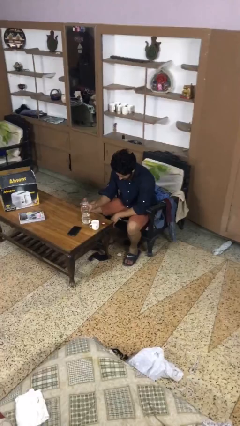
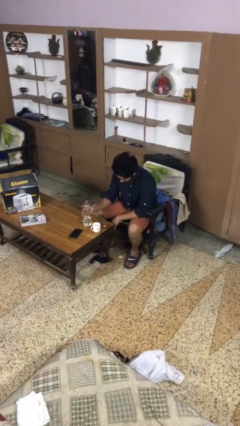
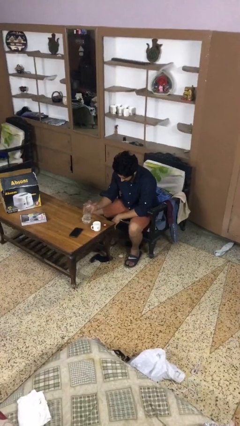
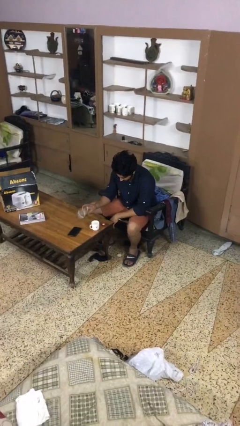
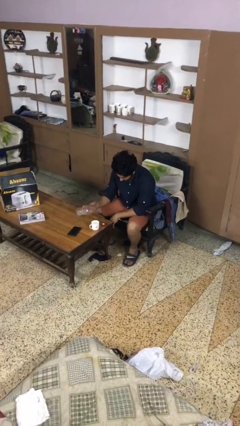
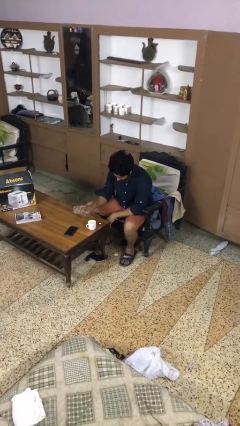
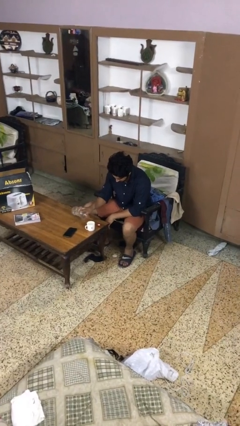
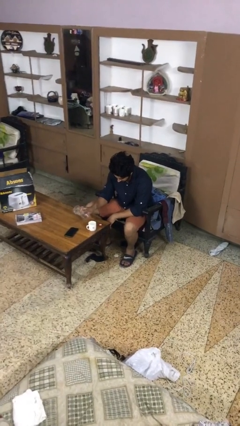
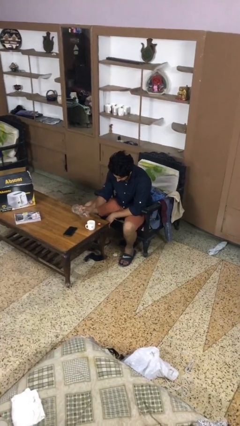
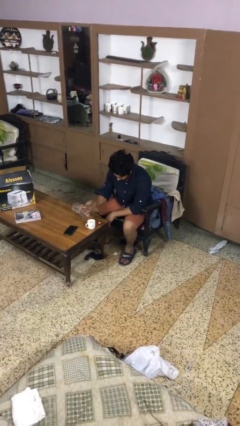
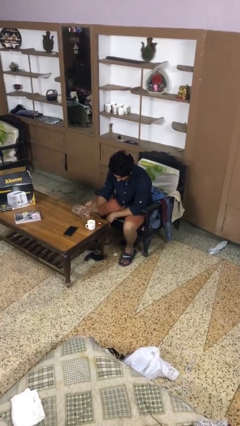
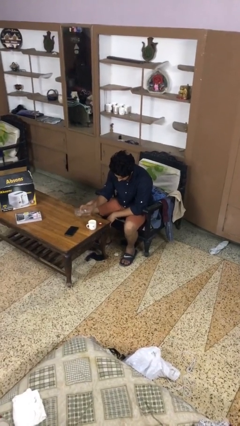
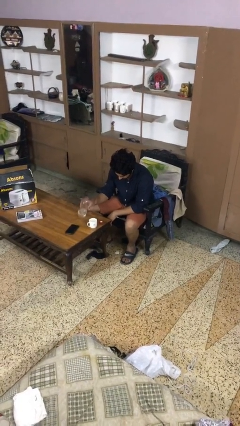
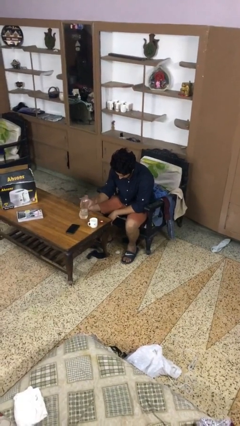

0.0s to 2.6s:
person pours liquid into cup

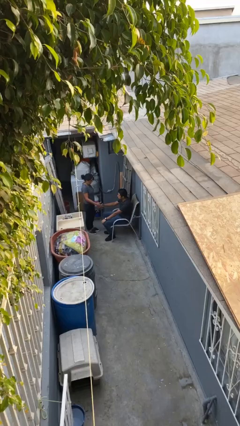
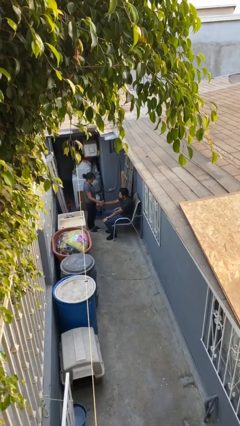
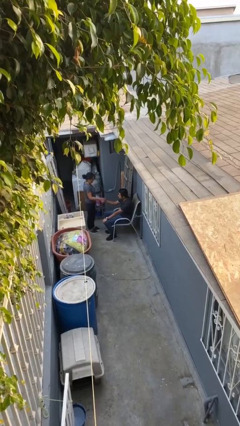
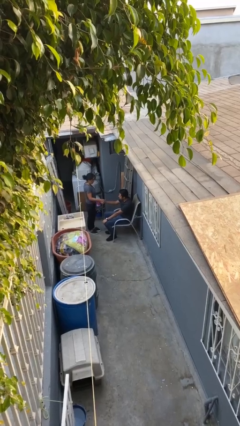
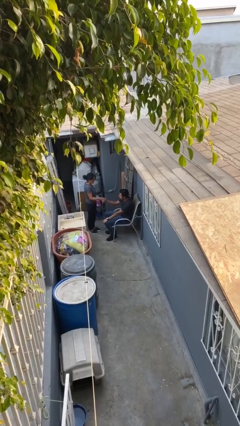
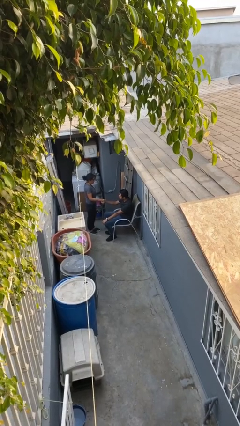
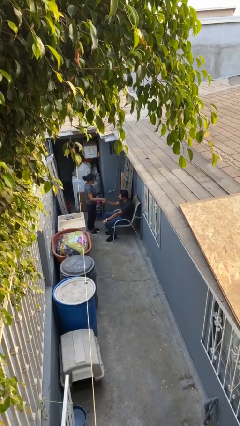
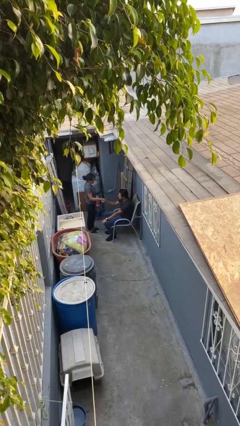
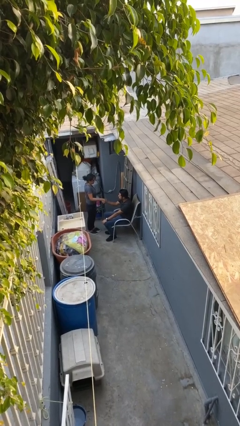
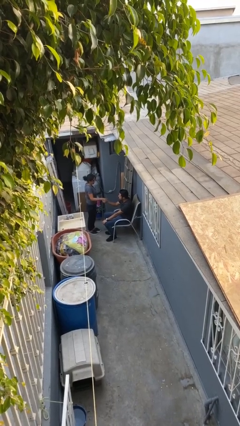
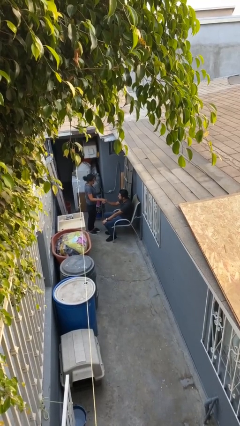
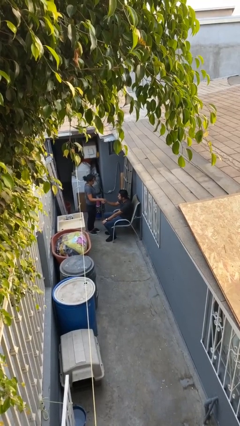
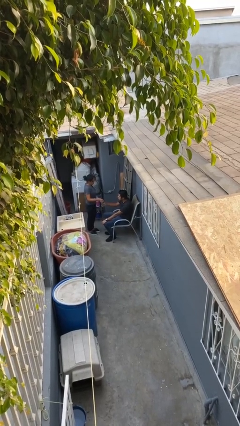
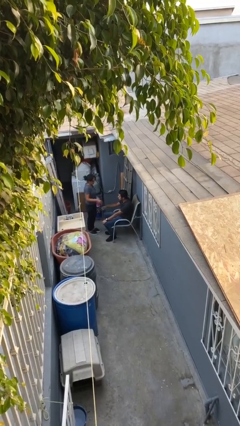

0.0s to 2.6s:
person shakes hand

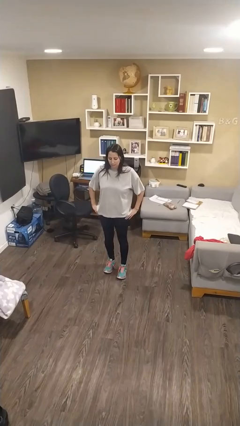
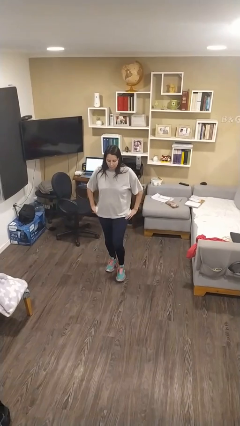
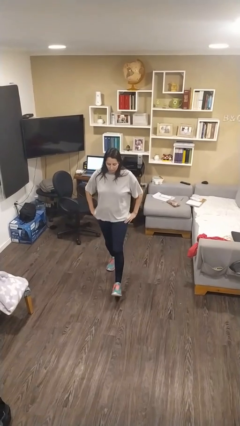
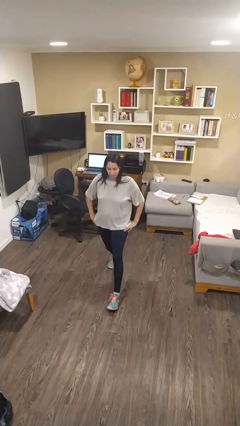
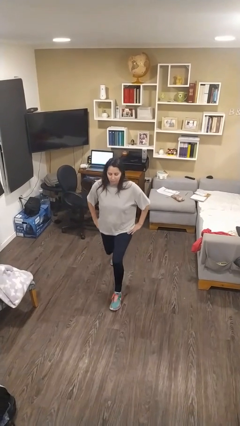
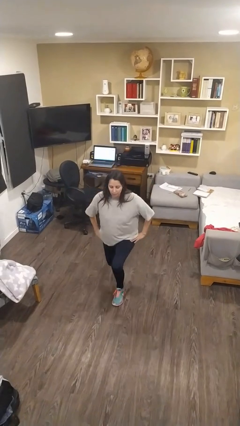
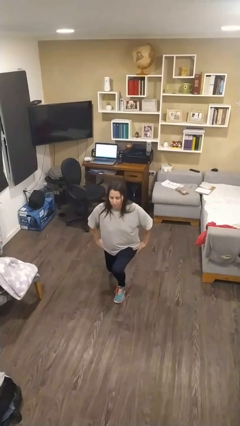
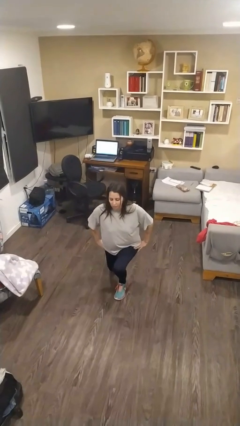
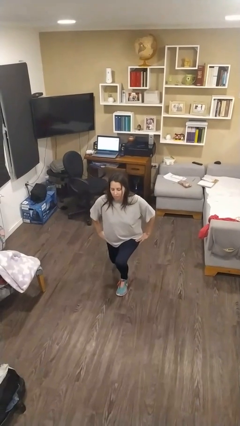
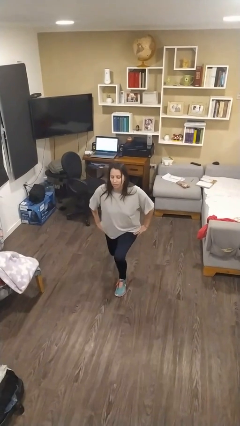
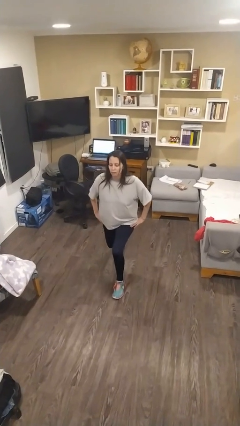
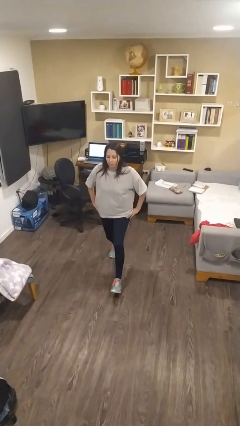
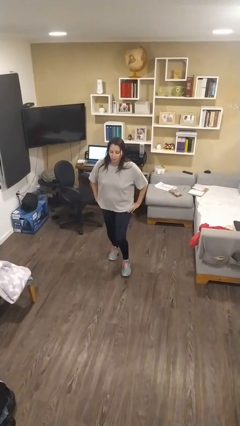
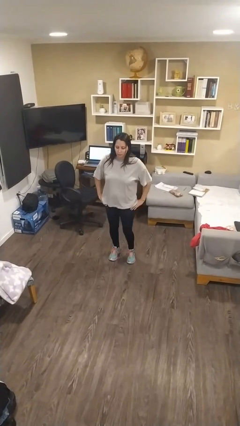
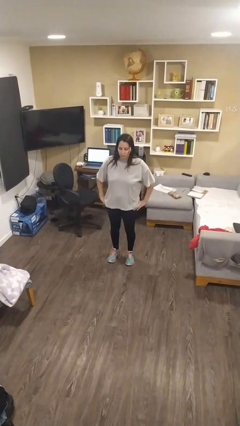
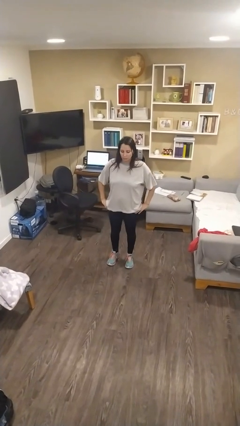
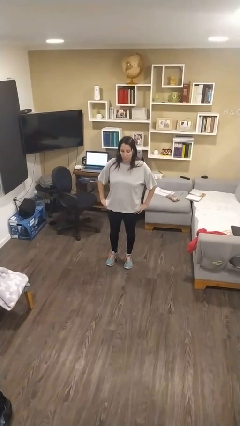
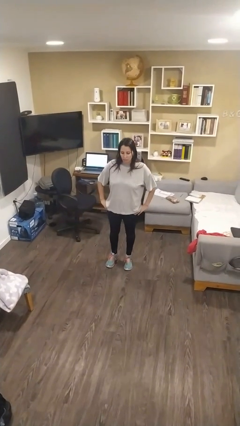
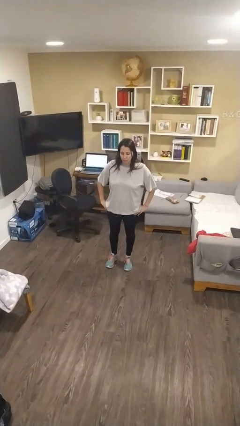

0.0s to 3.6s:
person exercises with lunges

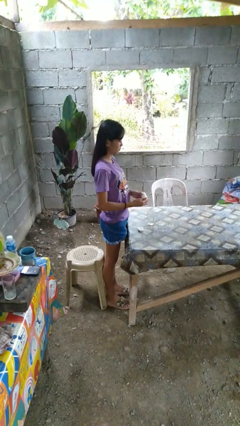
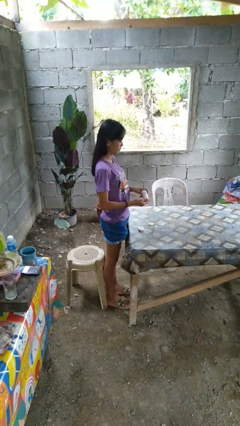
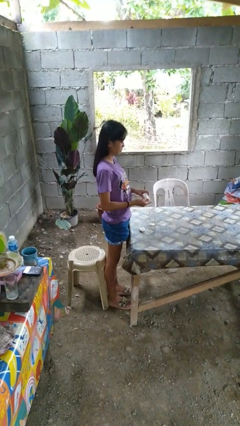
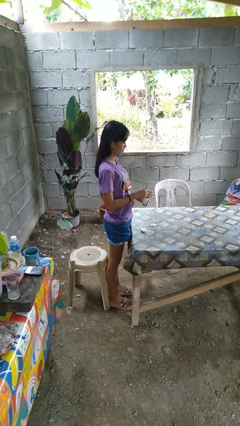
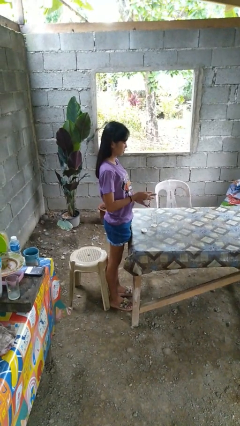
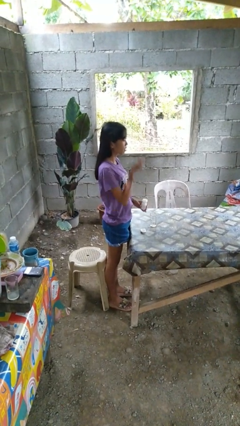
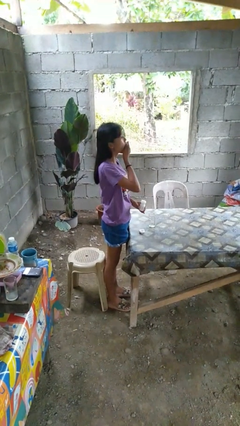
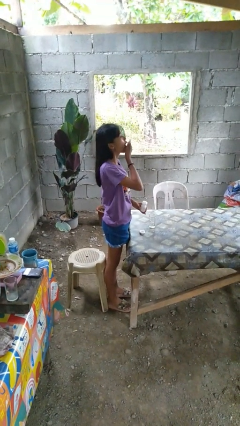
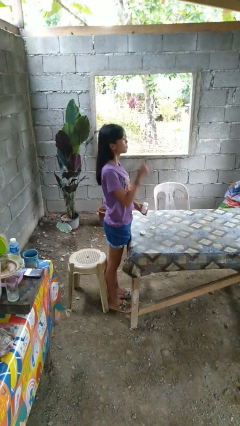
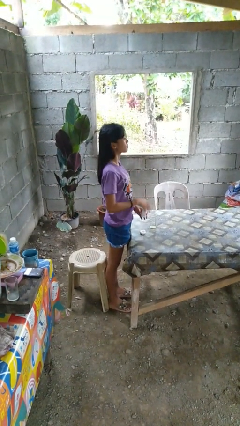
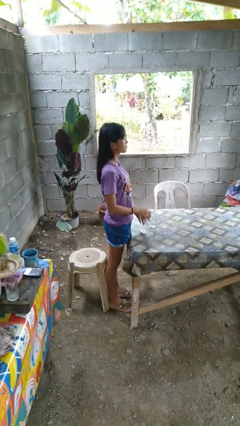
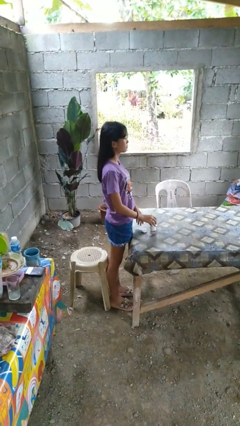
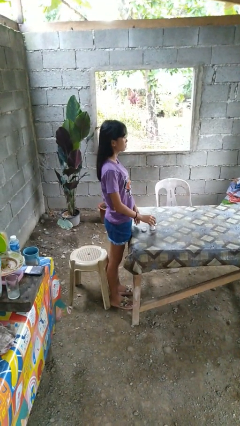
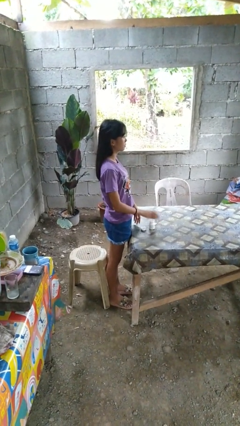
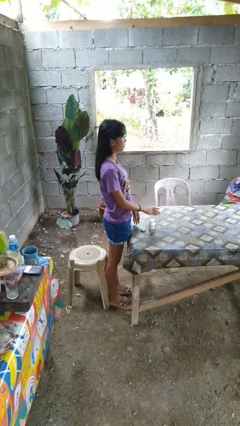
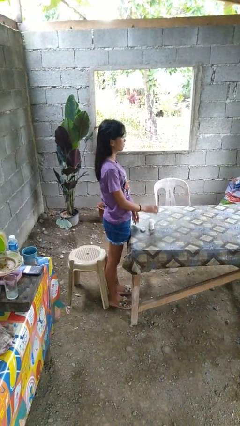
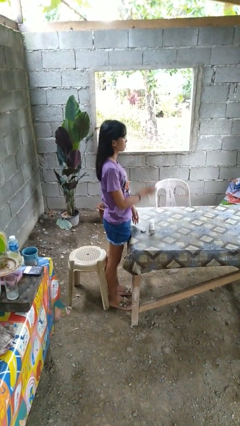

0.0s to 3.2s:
person takes medicine pills

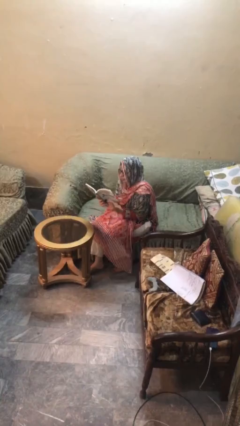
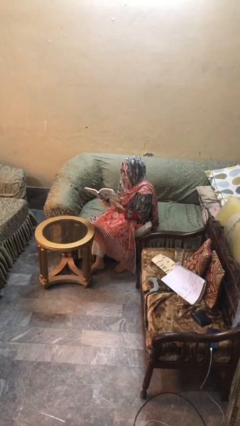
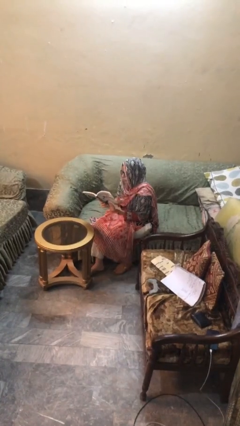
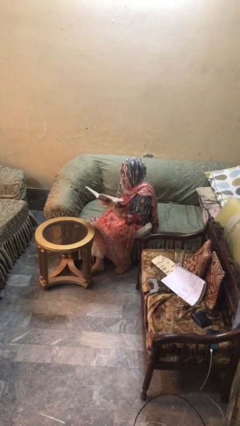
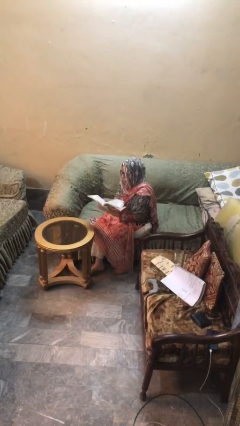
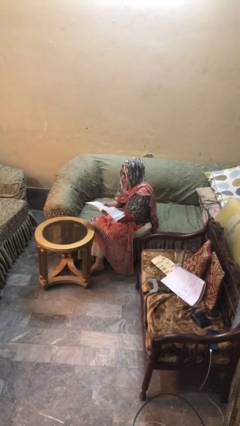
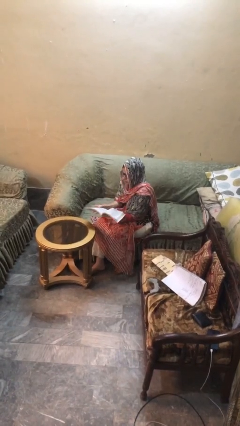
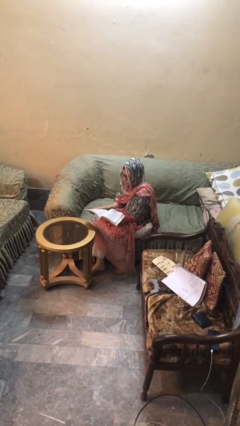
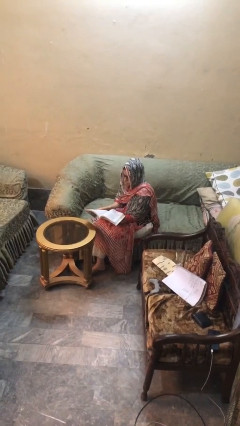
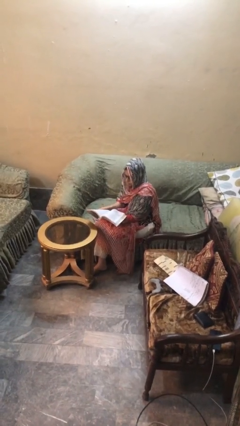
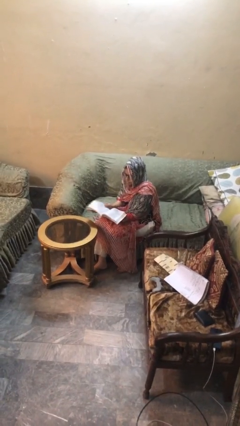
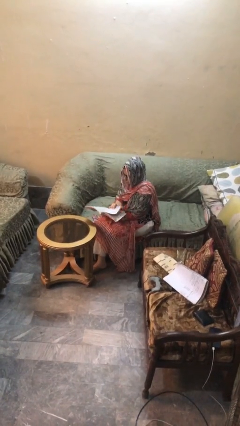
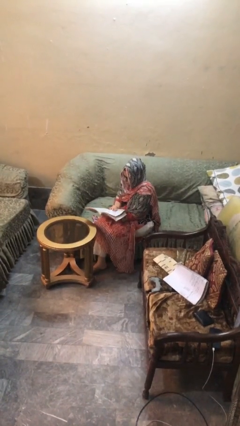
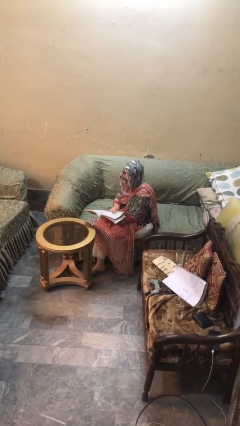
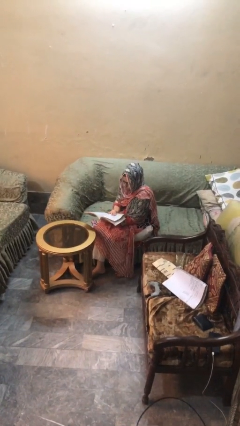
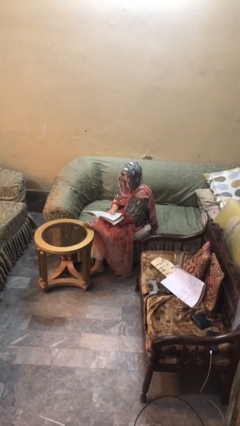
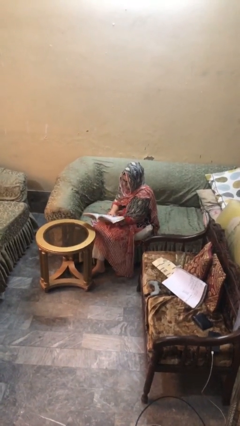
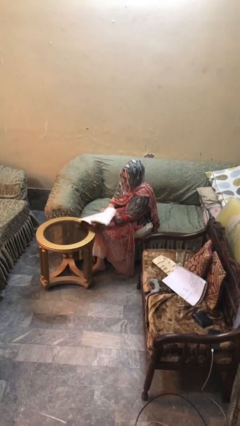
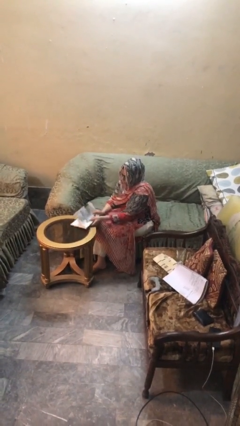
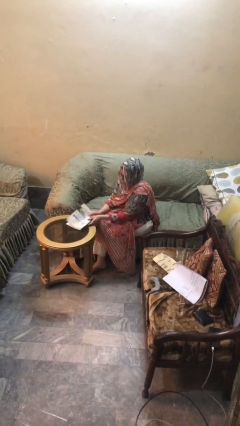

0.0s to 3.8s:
person reads book

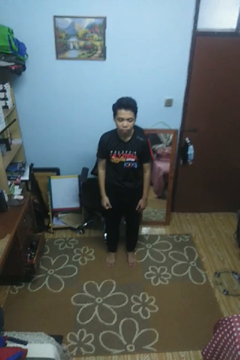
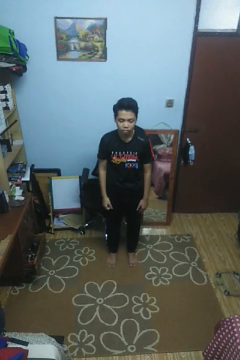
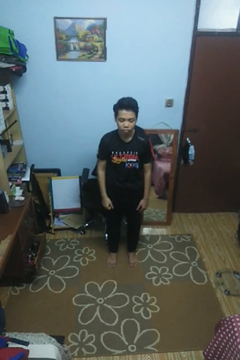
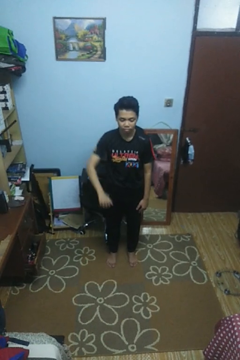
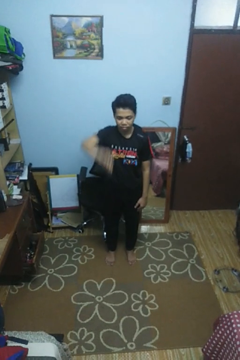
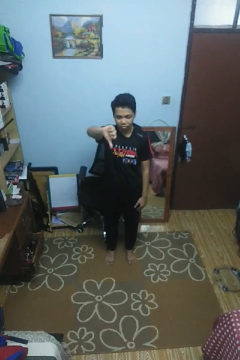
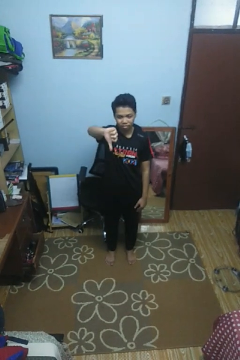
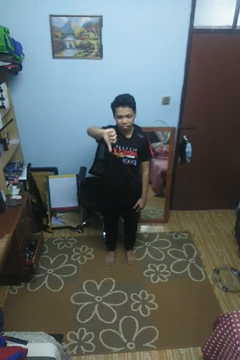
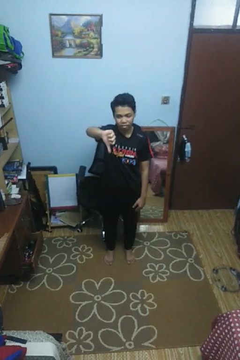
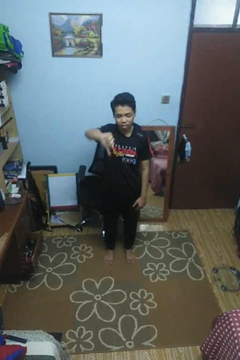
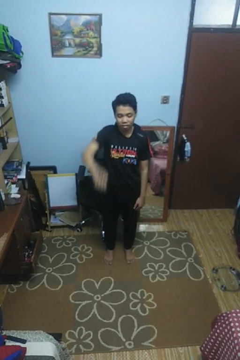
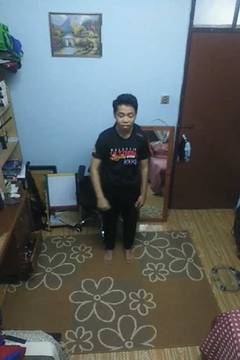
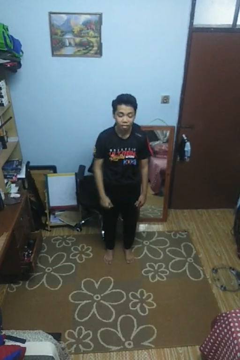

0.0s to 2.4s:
person gestures thumbs down
